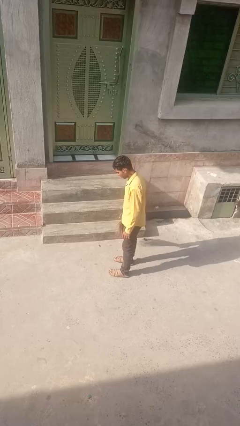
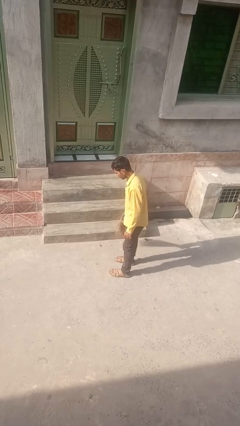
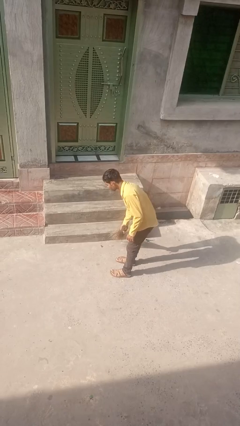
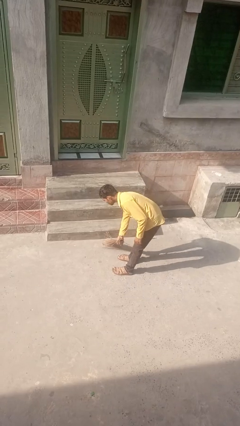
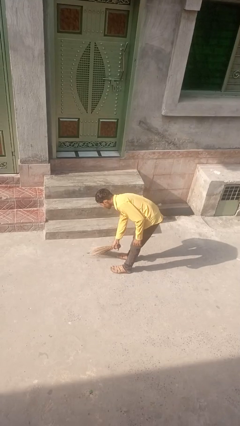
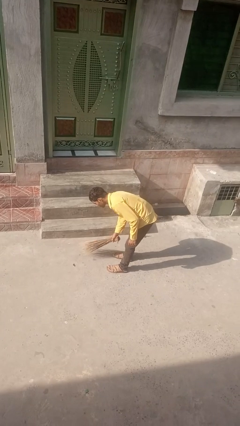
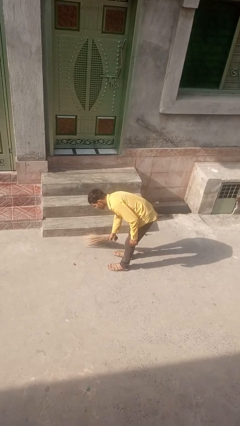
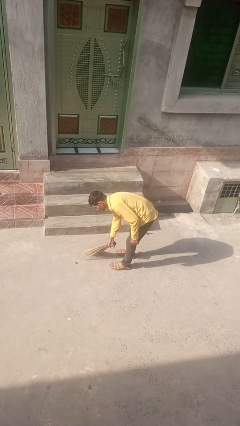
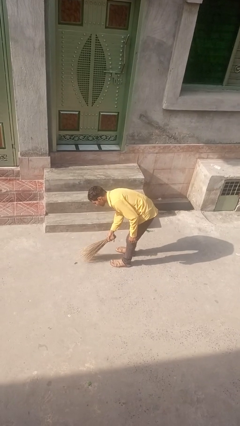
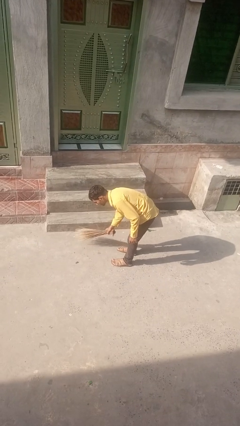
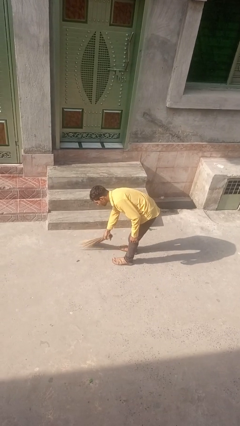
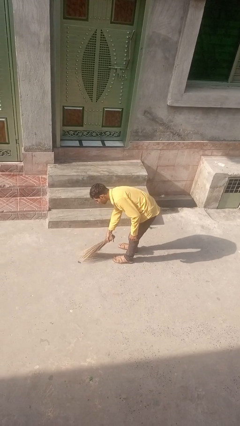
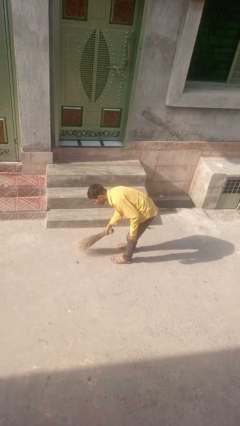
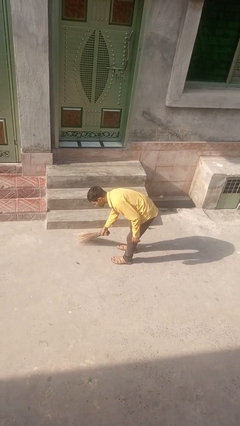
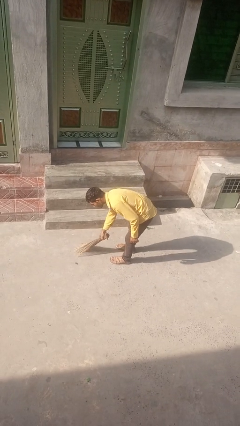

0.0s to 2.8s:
person sweeps floor

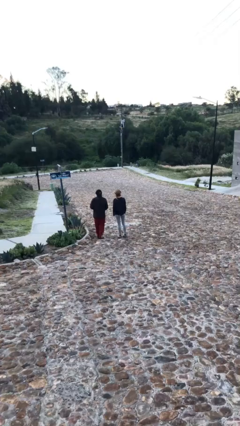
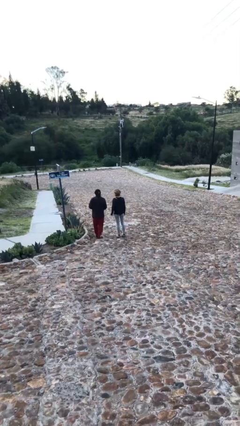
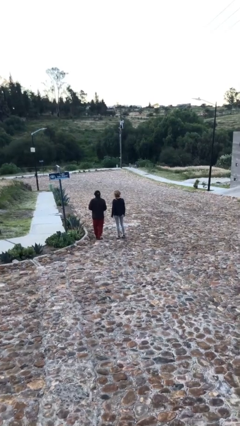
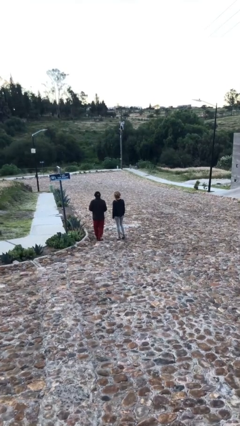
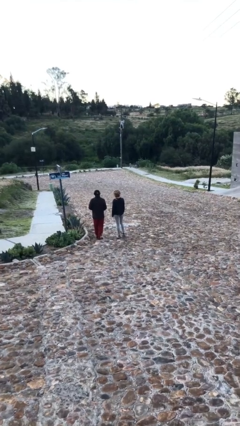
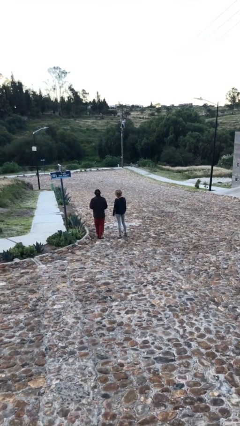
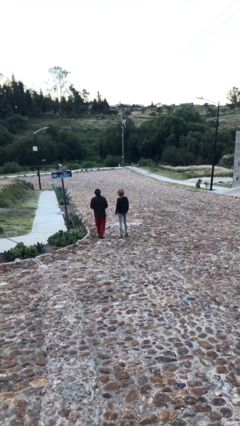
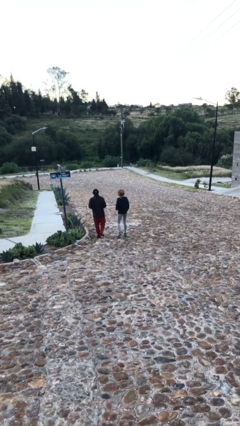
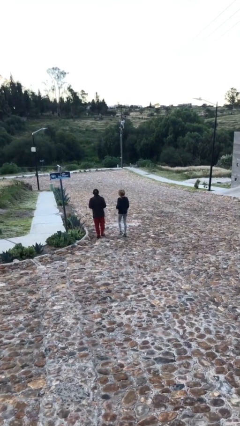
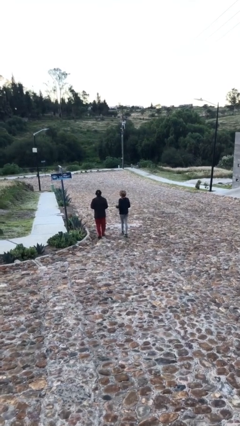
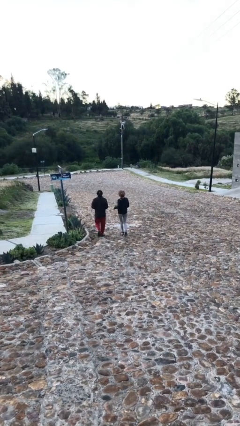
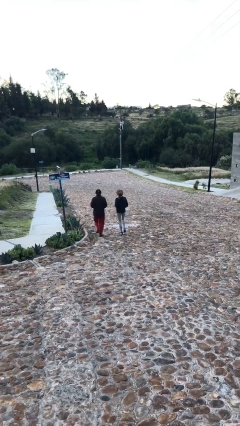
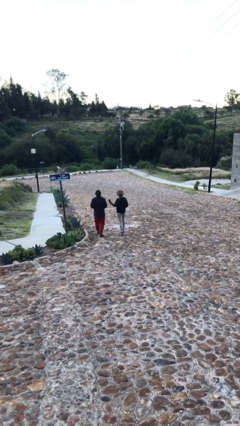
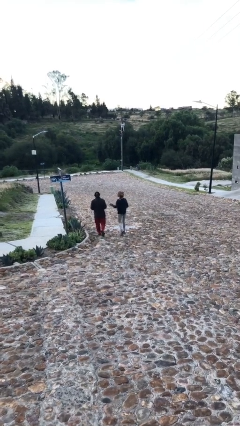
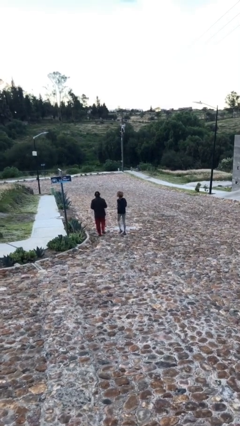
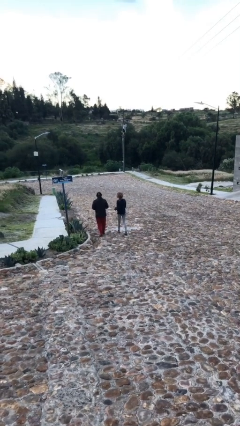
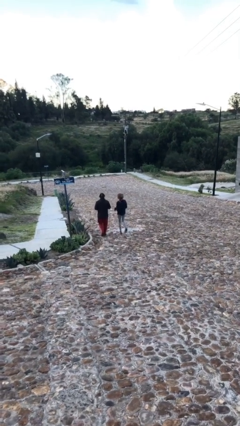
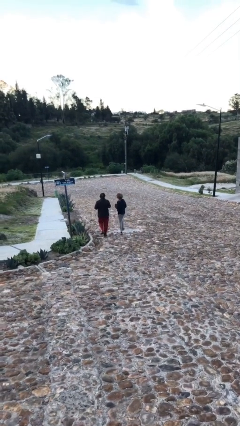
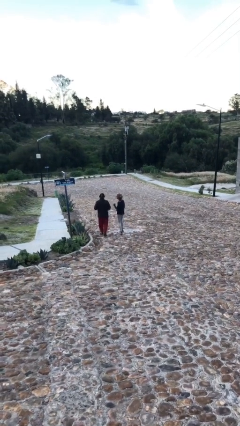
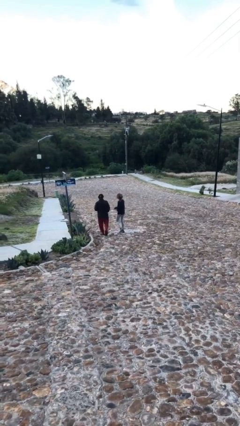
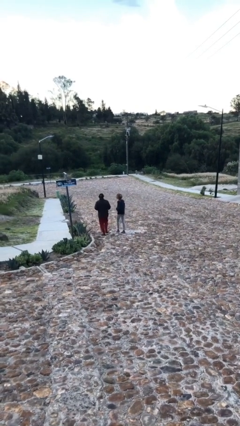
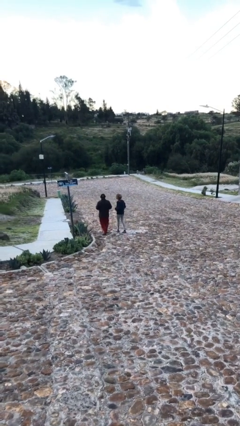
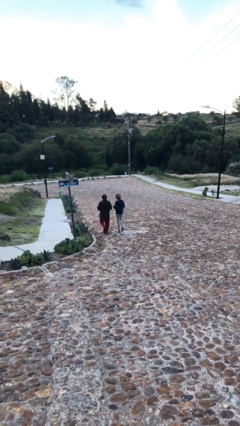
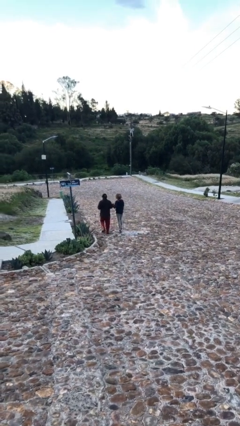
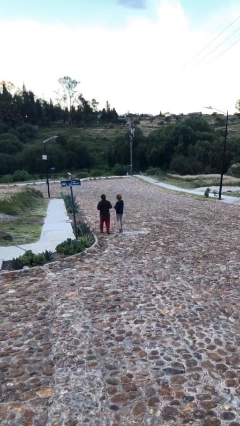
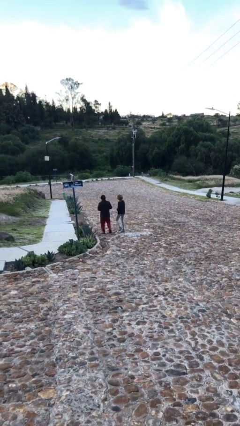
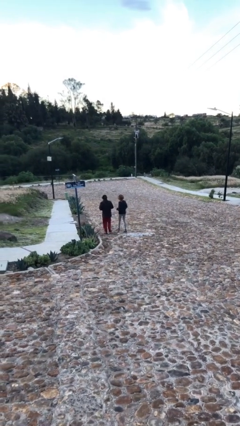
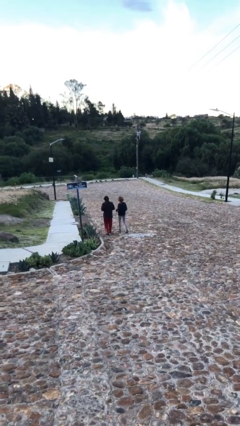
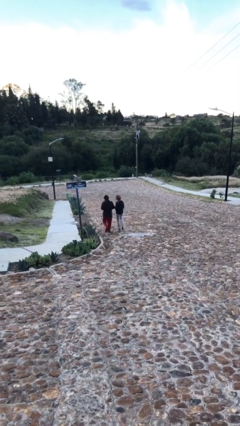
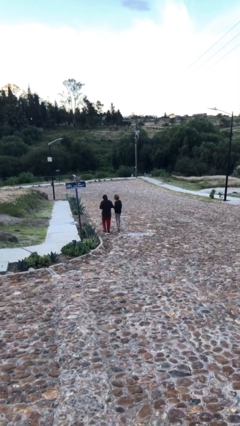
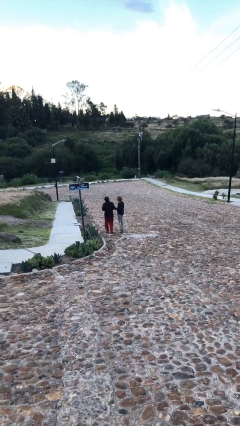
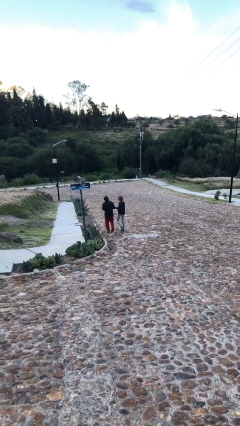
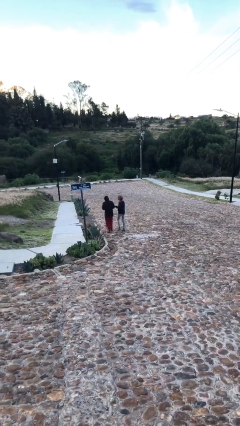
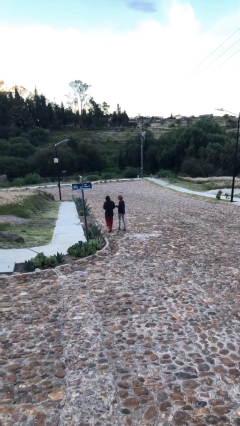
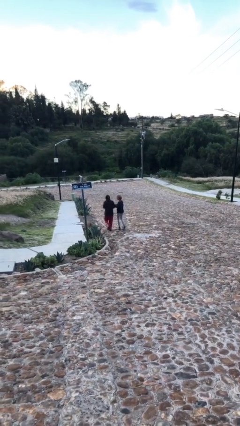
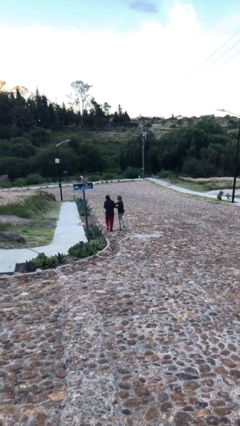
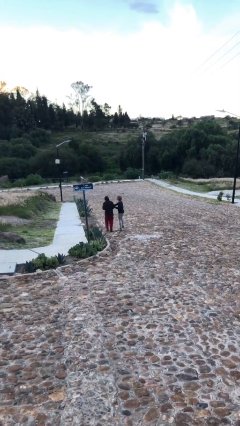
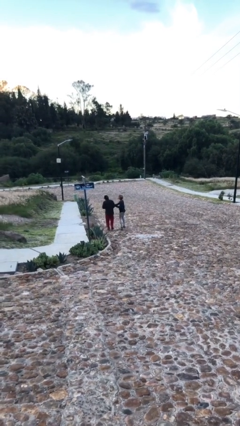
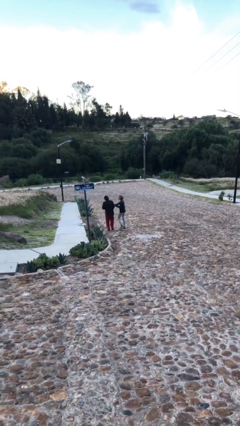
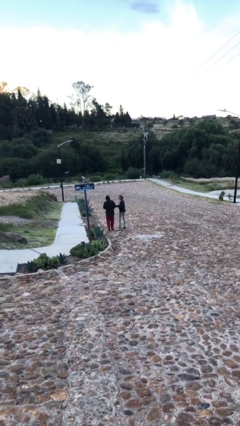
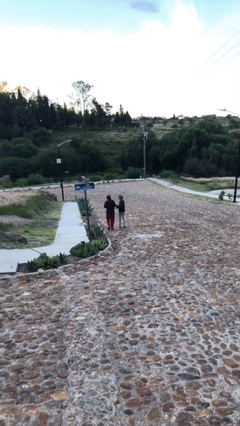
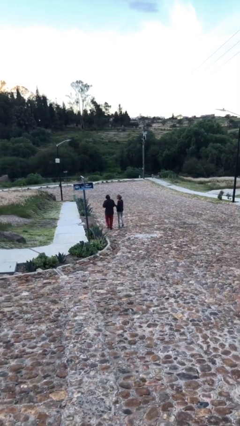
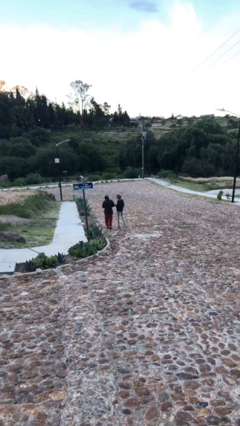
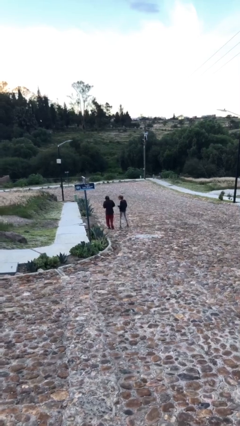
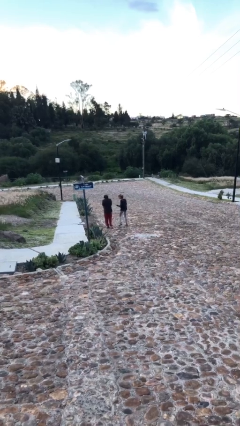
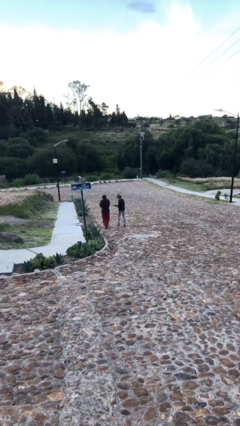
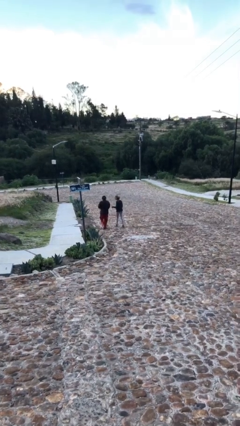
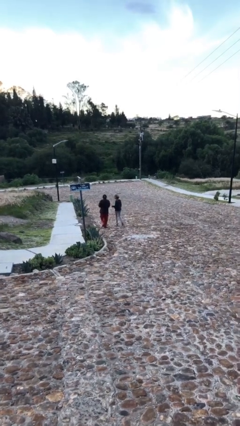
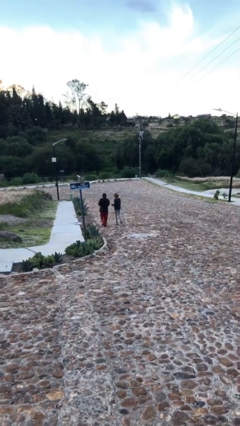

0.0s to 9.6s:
person talks to person

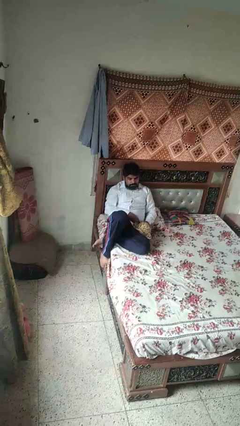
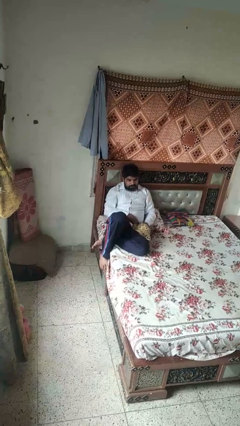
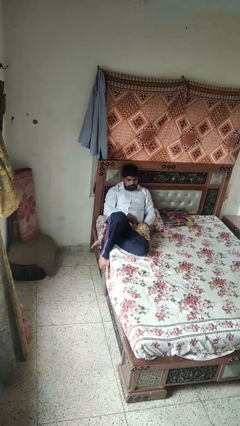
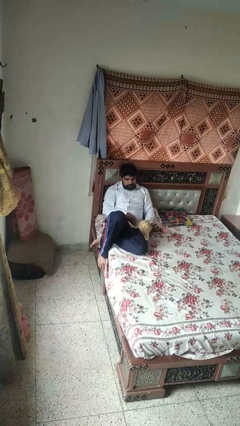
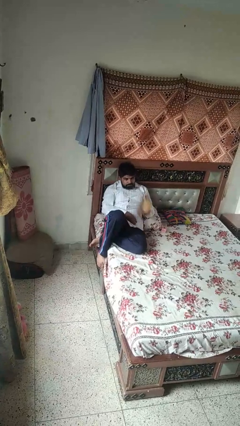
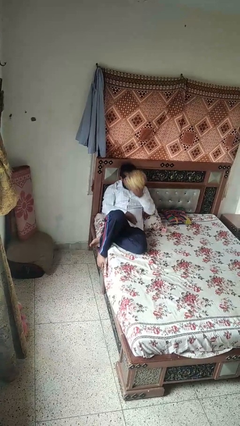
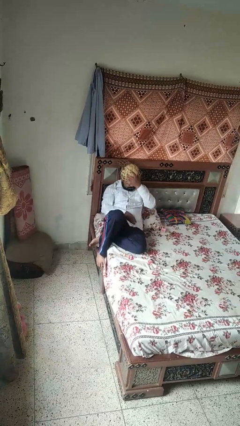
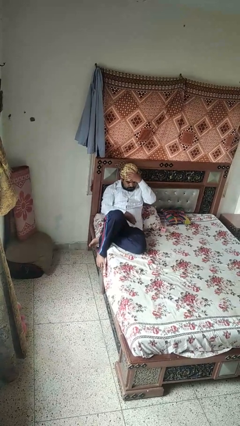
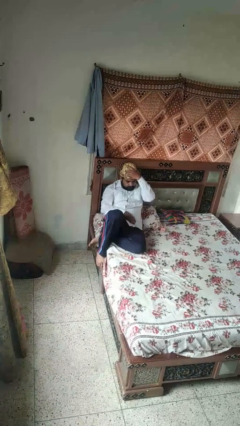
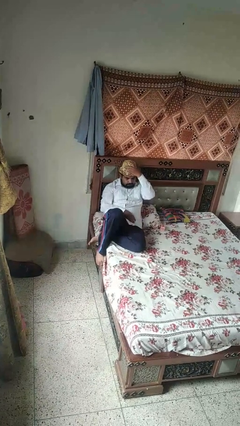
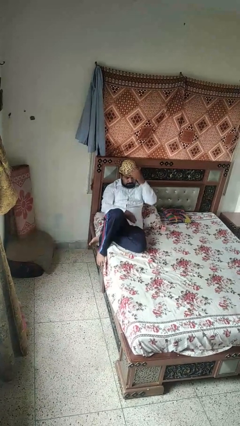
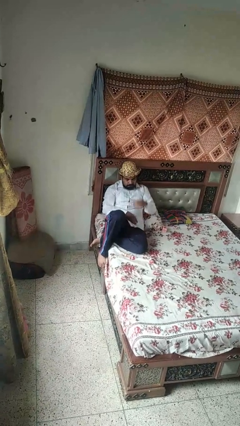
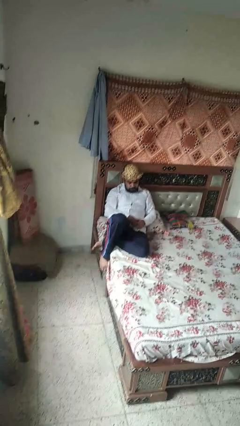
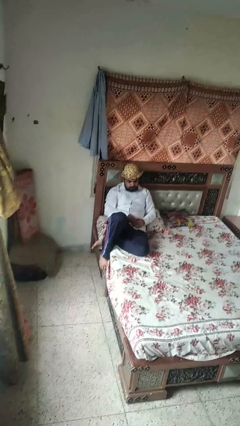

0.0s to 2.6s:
person puts on hat

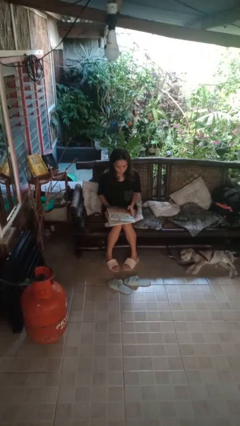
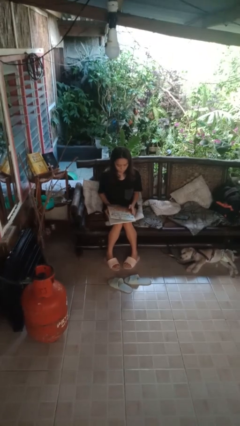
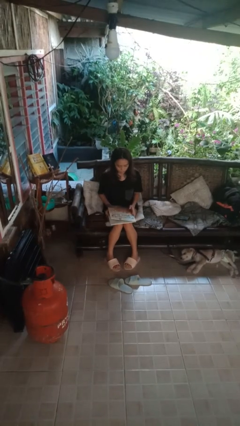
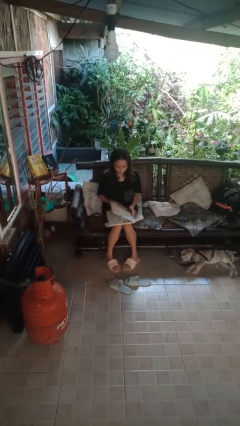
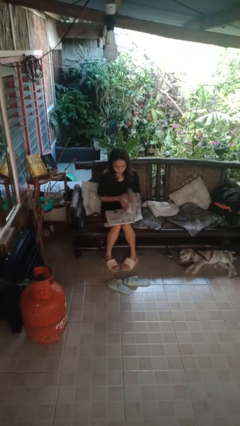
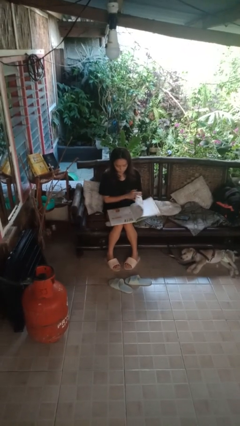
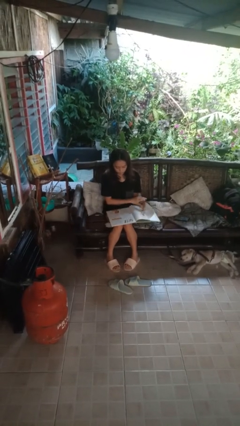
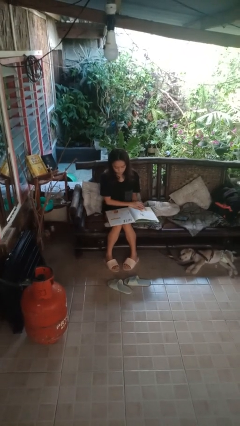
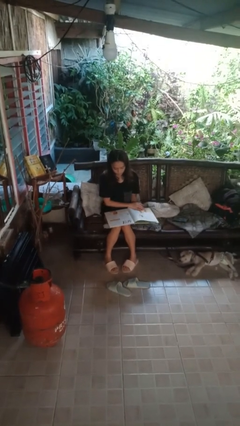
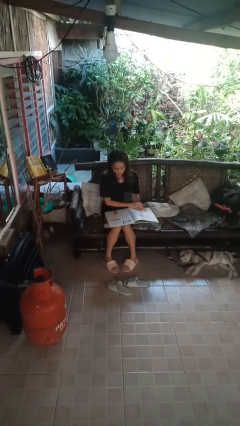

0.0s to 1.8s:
person reads book

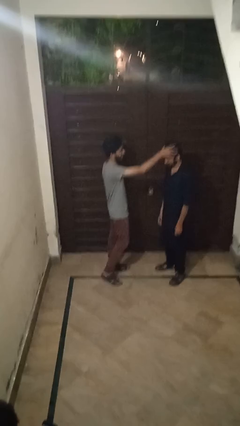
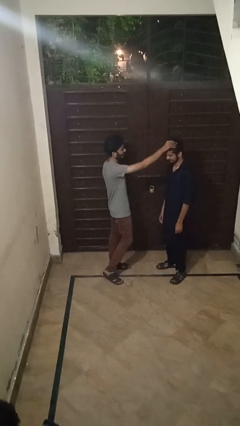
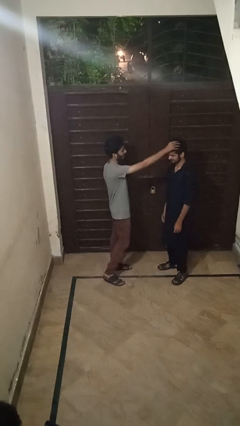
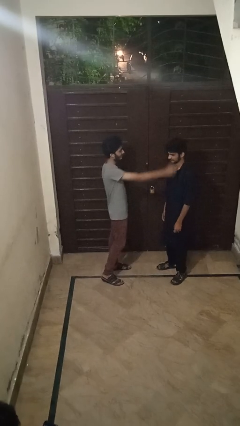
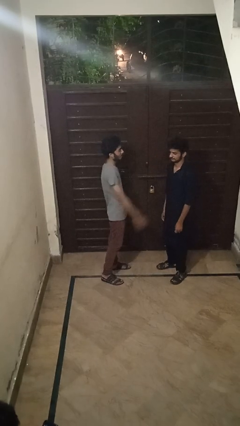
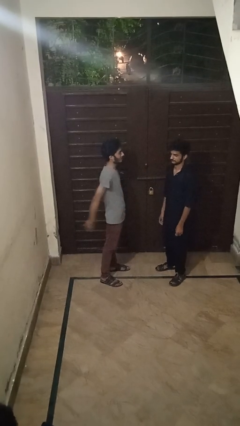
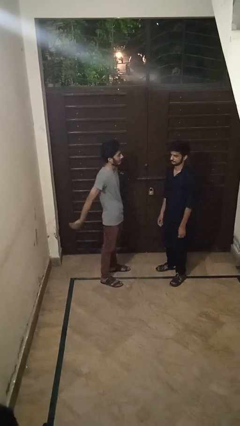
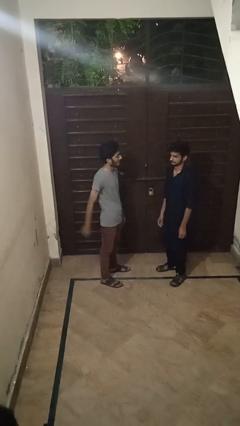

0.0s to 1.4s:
person grabs person by hair
